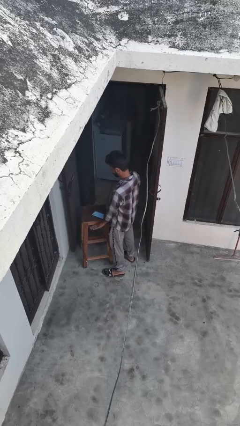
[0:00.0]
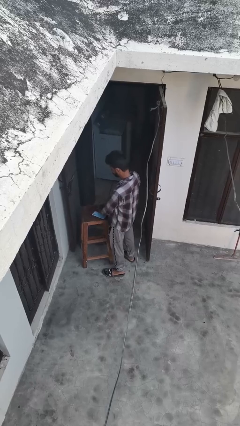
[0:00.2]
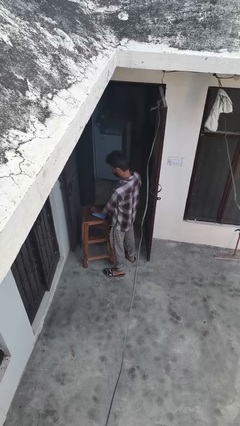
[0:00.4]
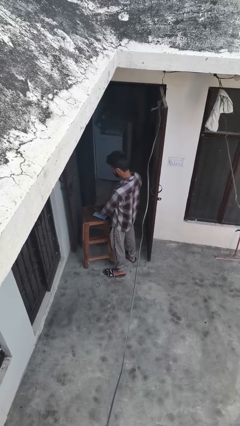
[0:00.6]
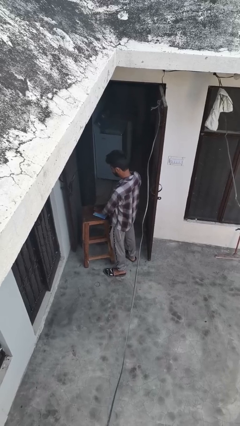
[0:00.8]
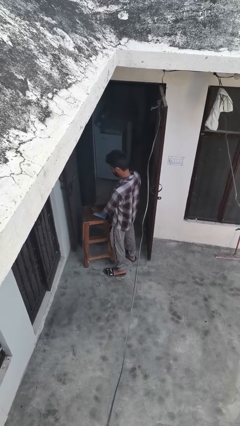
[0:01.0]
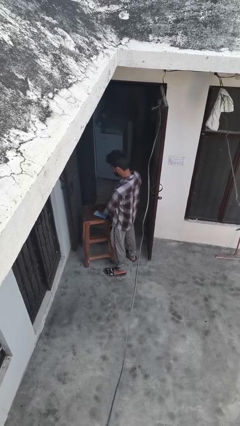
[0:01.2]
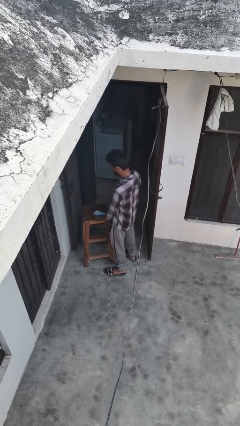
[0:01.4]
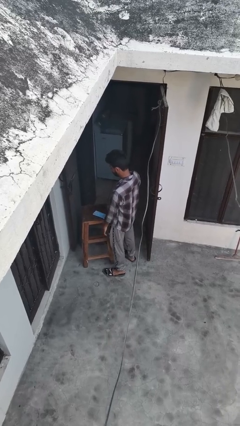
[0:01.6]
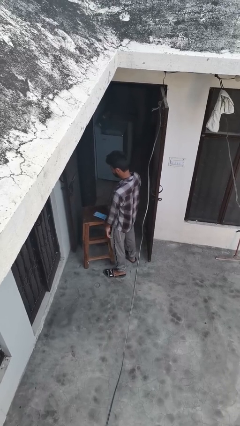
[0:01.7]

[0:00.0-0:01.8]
person waves hand over object

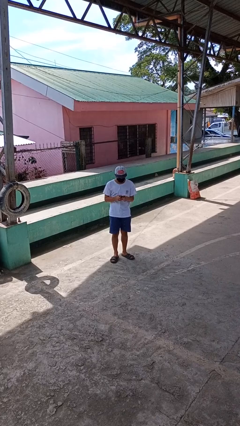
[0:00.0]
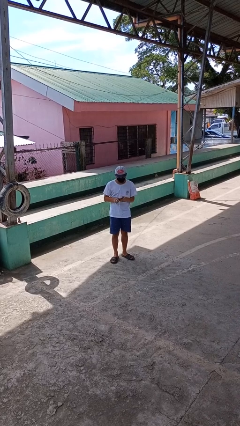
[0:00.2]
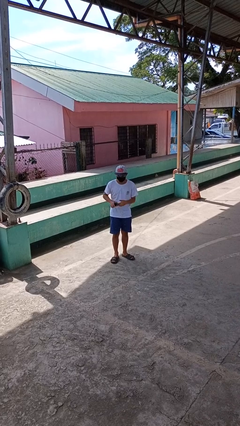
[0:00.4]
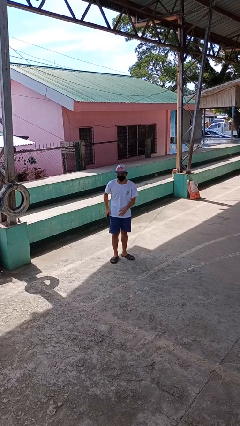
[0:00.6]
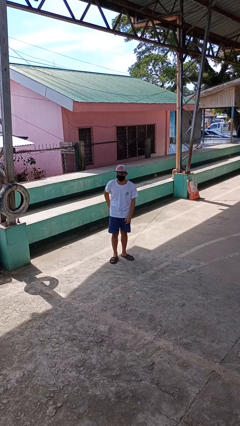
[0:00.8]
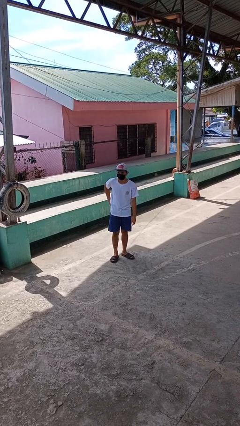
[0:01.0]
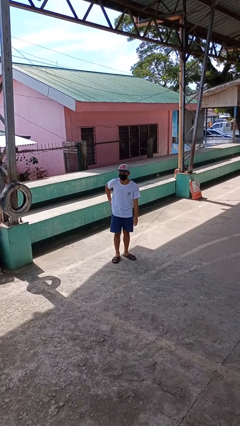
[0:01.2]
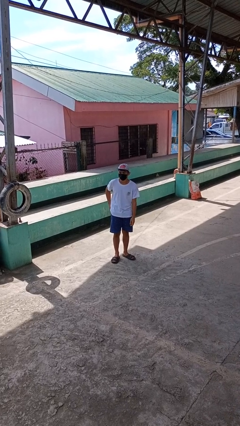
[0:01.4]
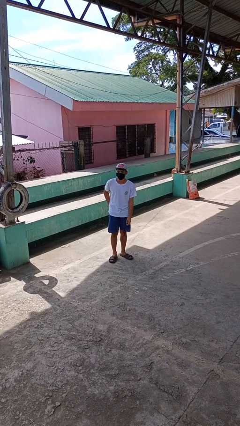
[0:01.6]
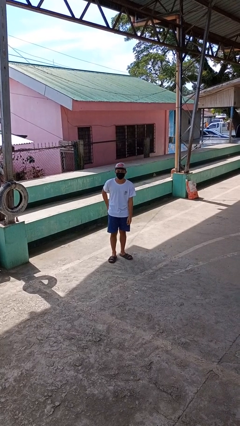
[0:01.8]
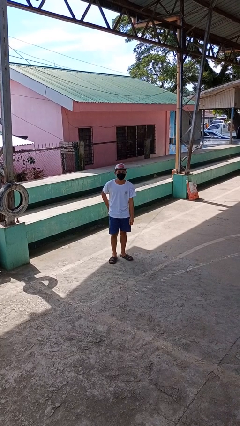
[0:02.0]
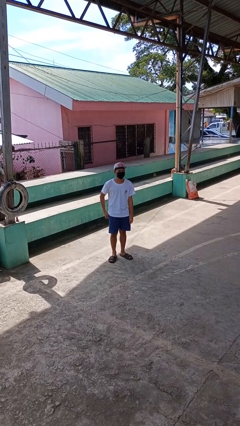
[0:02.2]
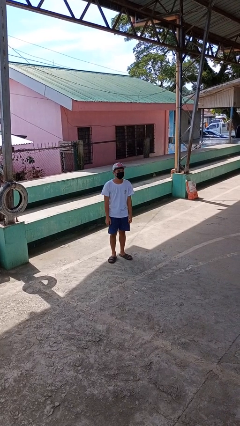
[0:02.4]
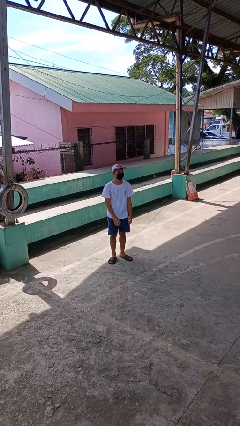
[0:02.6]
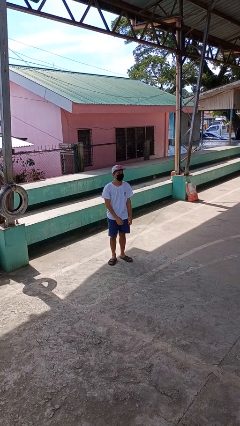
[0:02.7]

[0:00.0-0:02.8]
person puts phone into pocket

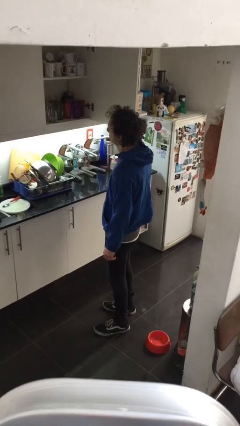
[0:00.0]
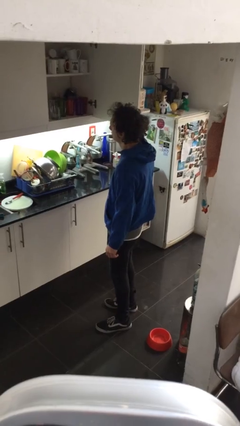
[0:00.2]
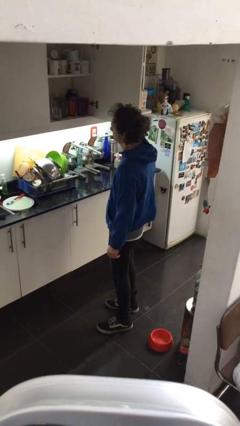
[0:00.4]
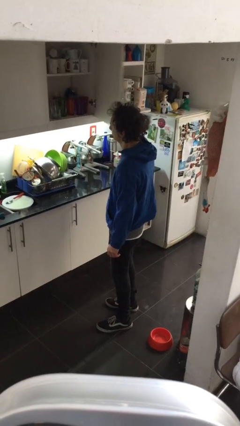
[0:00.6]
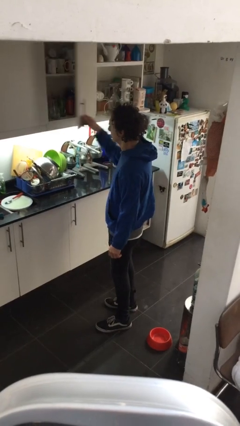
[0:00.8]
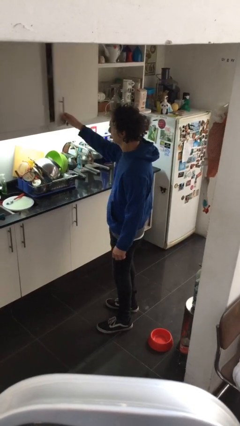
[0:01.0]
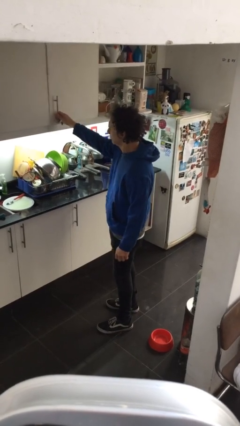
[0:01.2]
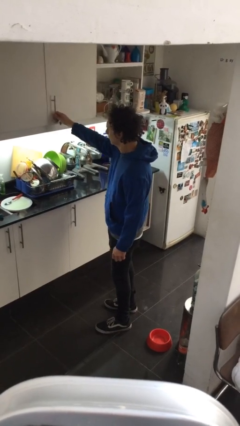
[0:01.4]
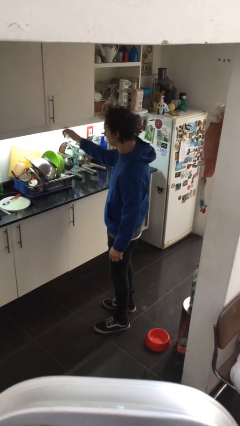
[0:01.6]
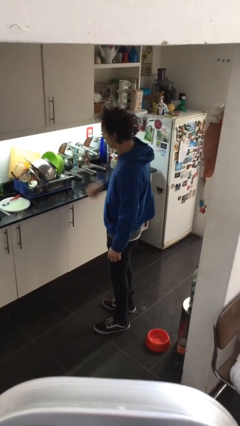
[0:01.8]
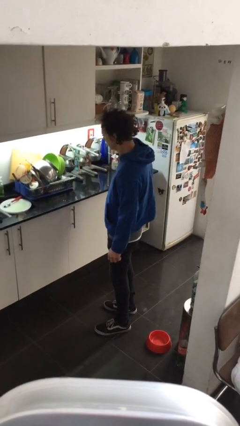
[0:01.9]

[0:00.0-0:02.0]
person closes cabinet

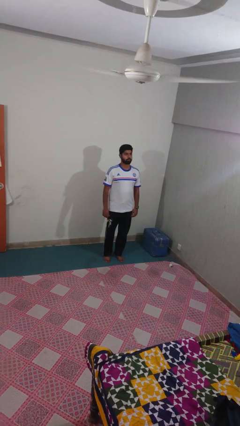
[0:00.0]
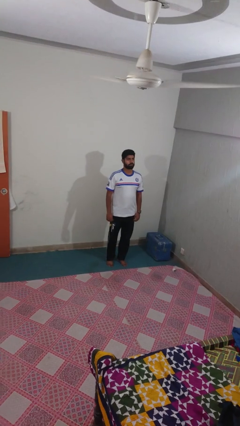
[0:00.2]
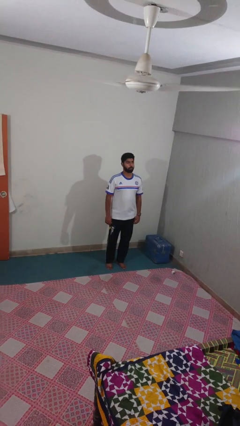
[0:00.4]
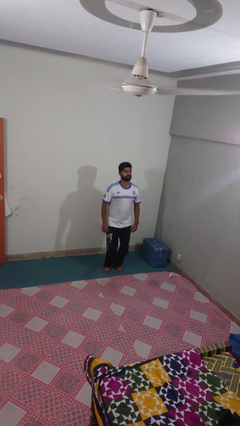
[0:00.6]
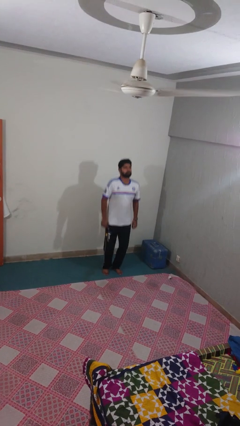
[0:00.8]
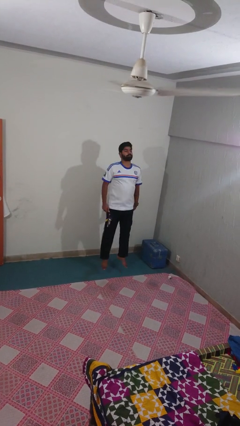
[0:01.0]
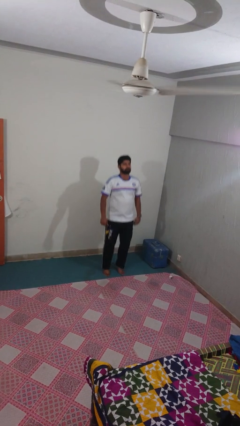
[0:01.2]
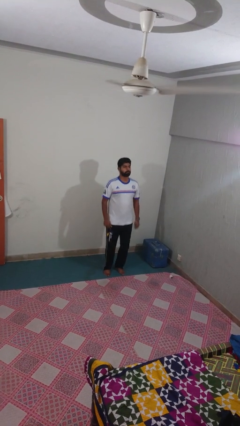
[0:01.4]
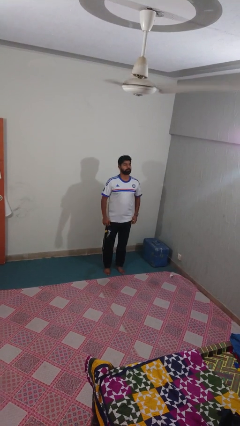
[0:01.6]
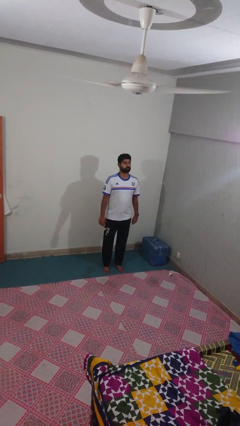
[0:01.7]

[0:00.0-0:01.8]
person jumps

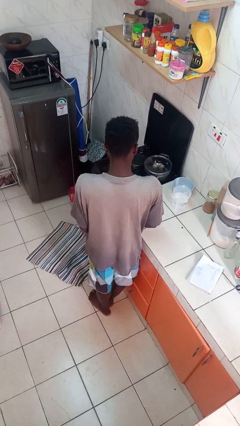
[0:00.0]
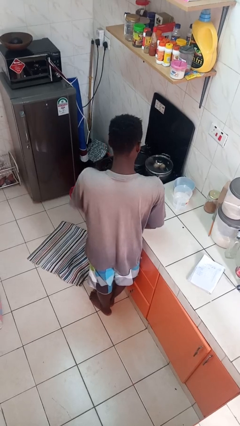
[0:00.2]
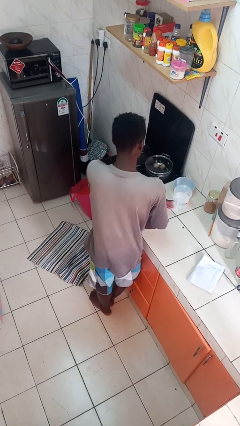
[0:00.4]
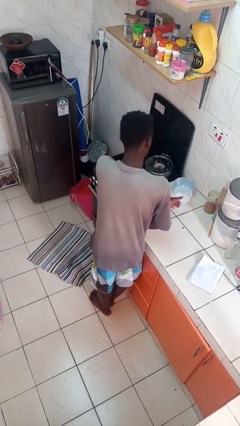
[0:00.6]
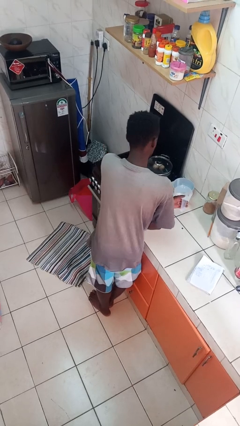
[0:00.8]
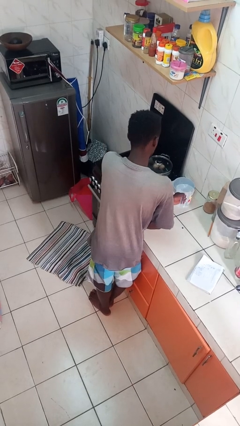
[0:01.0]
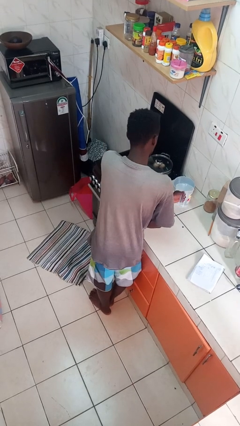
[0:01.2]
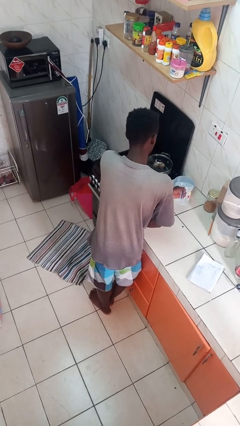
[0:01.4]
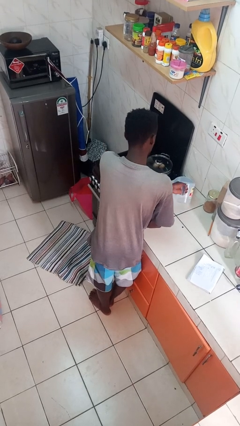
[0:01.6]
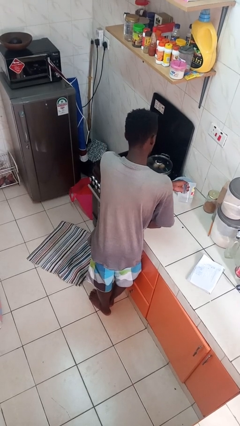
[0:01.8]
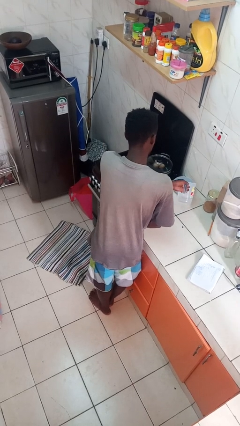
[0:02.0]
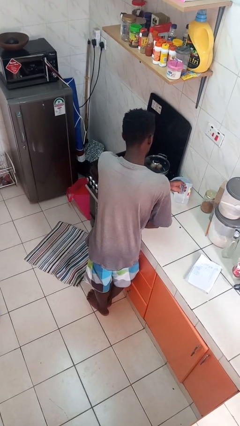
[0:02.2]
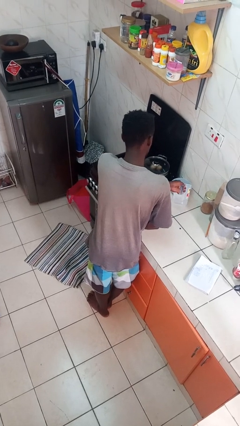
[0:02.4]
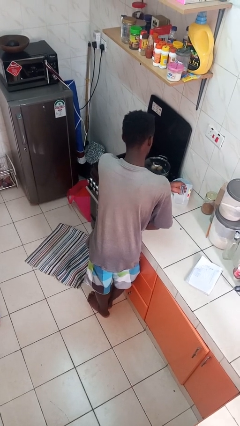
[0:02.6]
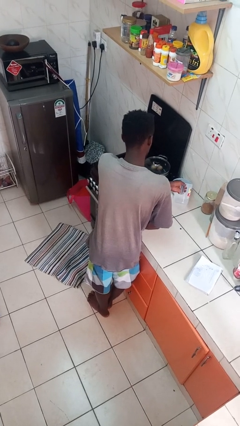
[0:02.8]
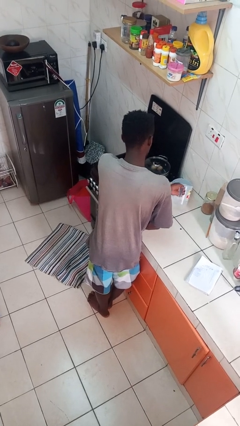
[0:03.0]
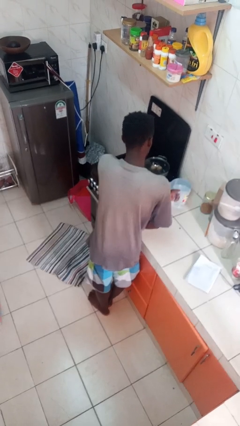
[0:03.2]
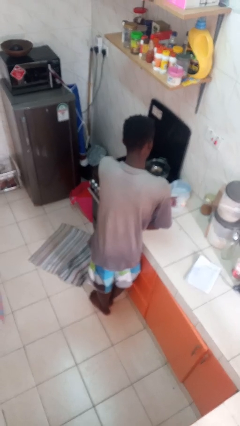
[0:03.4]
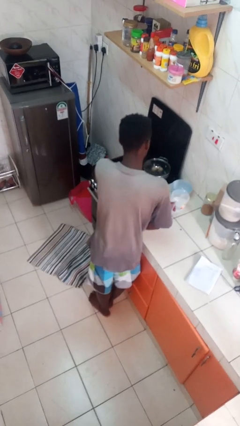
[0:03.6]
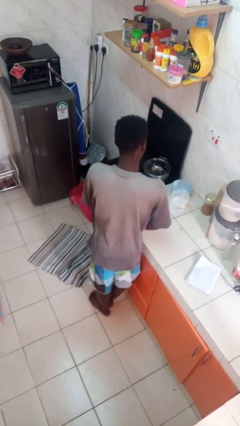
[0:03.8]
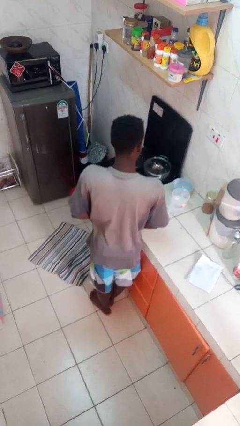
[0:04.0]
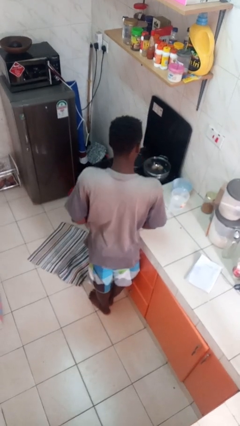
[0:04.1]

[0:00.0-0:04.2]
person pours into bowl

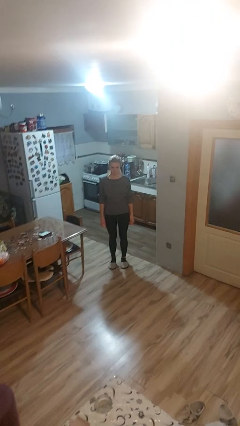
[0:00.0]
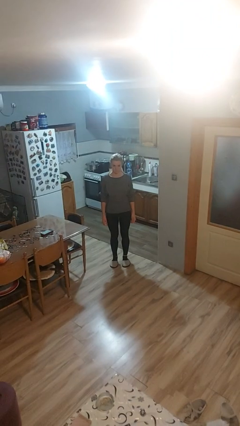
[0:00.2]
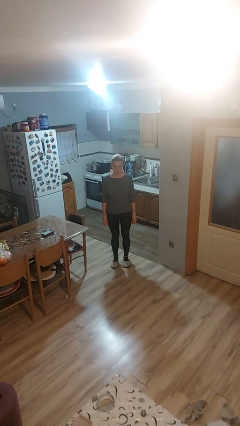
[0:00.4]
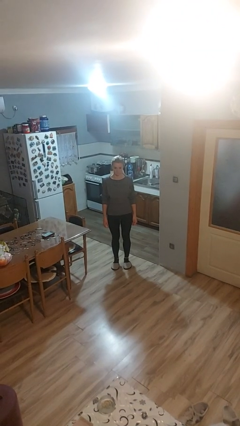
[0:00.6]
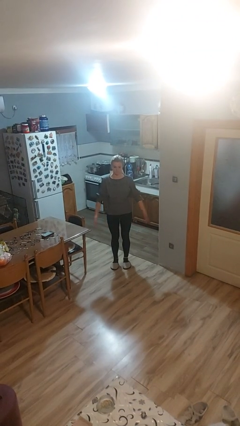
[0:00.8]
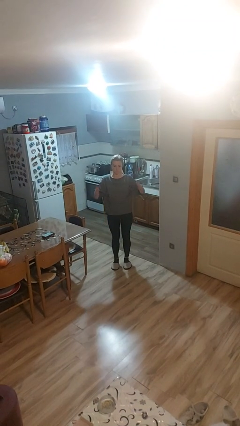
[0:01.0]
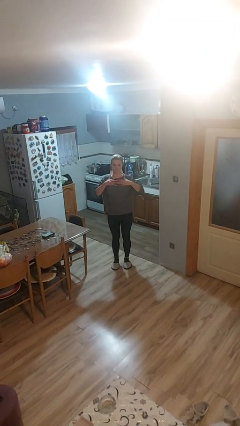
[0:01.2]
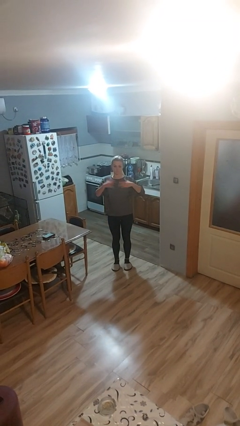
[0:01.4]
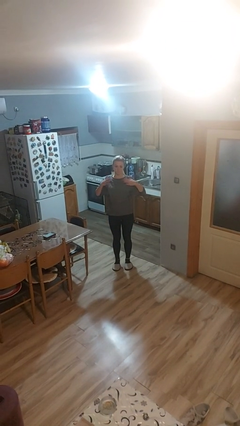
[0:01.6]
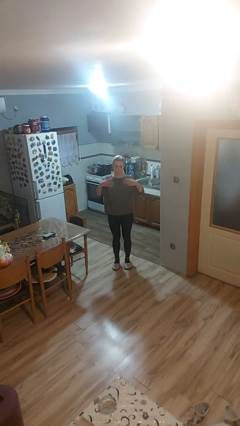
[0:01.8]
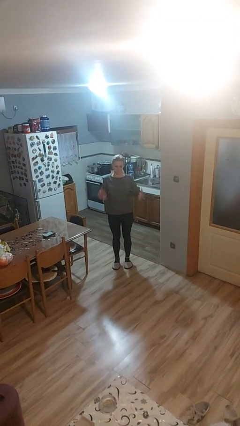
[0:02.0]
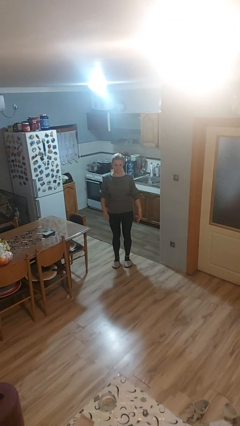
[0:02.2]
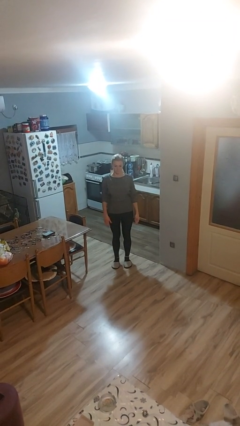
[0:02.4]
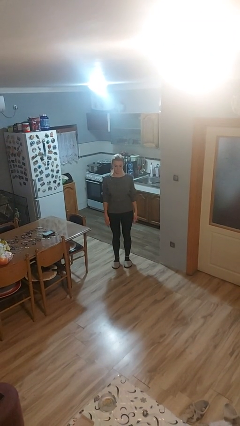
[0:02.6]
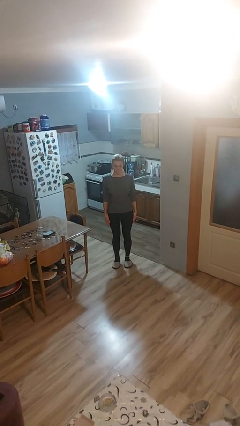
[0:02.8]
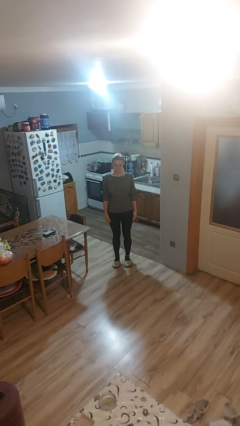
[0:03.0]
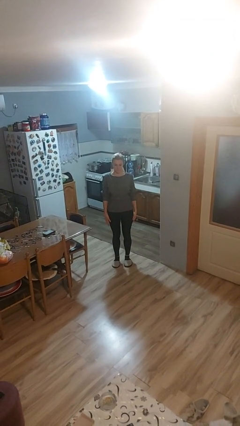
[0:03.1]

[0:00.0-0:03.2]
person drums on chest

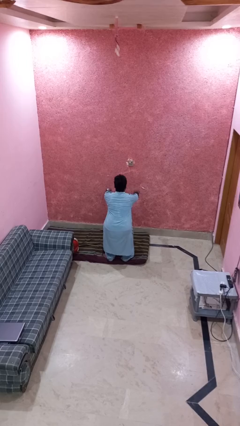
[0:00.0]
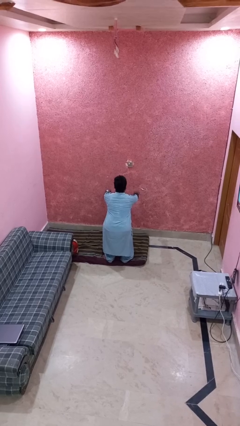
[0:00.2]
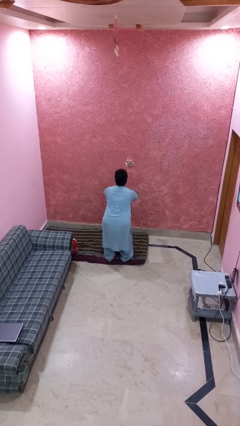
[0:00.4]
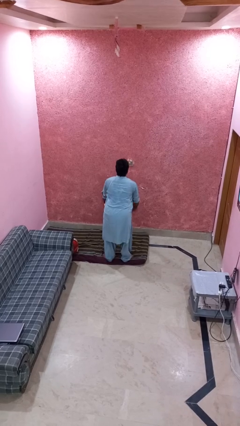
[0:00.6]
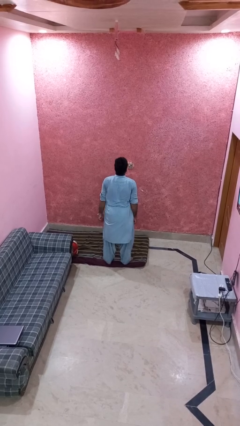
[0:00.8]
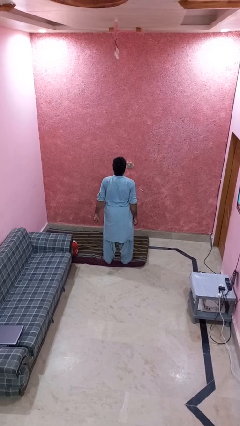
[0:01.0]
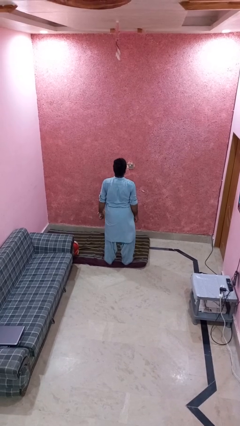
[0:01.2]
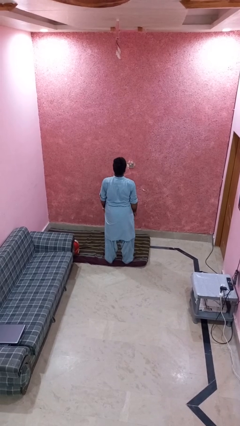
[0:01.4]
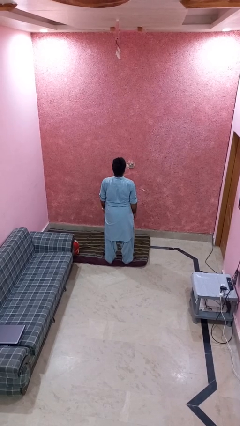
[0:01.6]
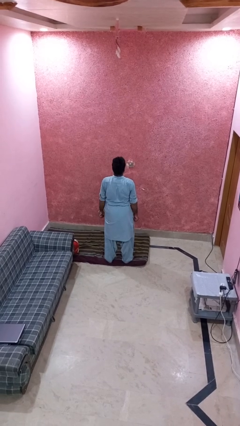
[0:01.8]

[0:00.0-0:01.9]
person stands up
